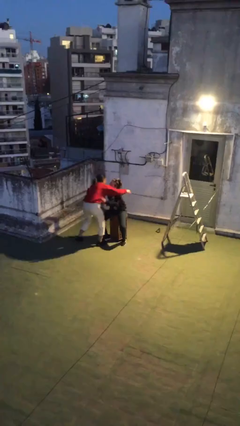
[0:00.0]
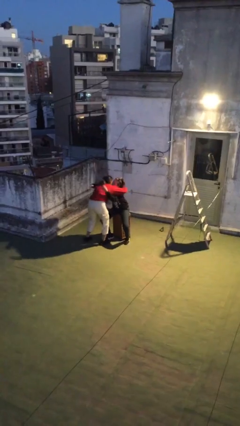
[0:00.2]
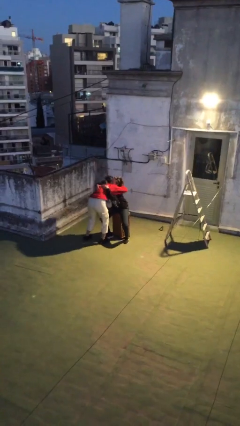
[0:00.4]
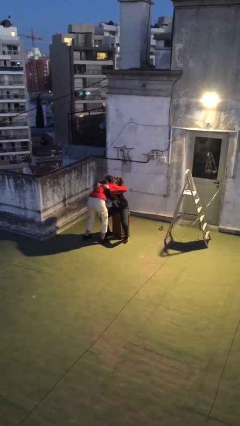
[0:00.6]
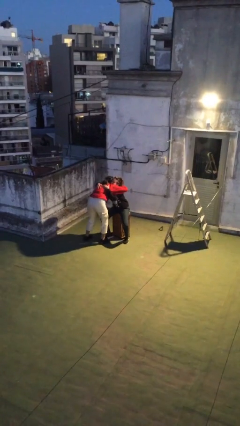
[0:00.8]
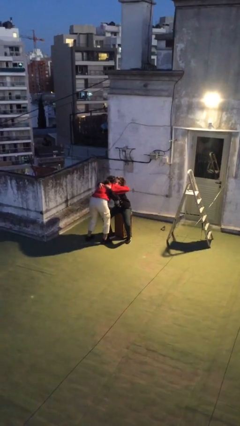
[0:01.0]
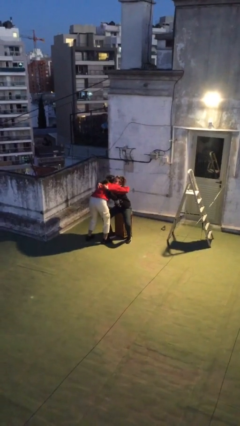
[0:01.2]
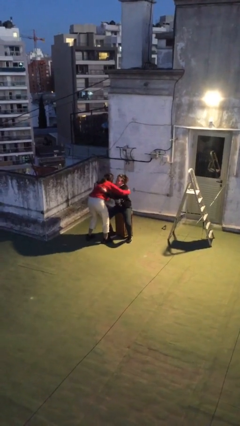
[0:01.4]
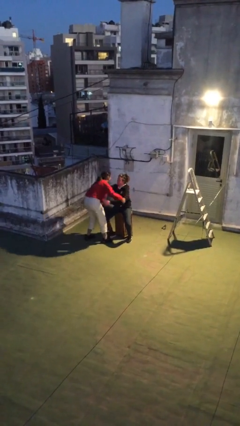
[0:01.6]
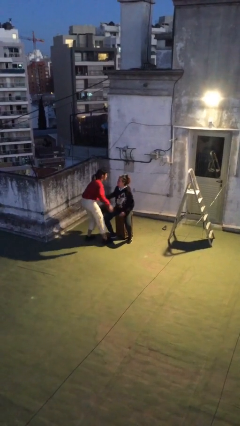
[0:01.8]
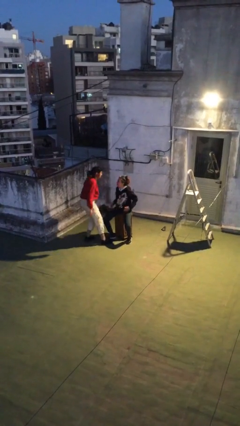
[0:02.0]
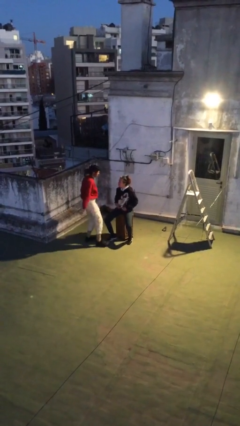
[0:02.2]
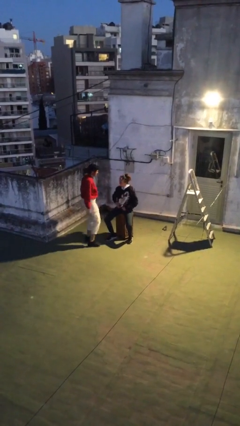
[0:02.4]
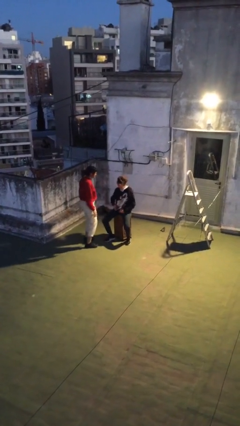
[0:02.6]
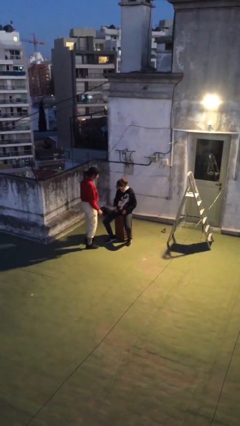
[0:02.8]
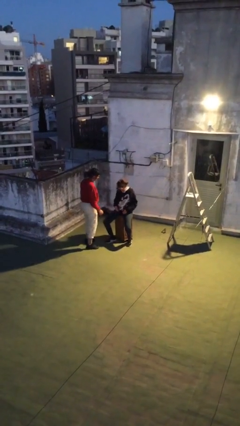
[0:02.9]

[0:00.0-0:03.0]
person embraces person

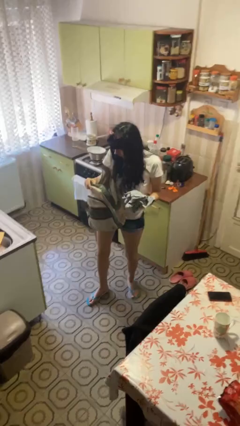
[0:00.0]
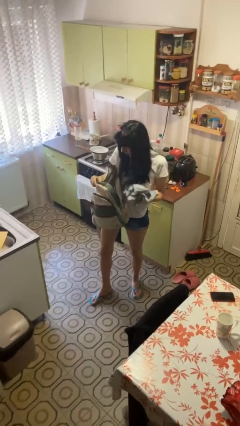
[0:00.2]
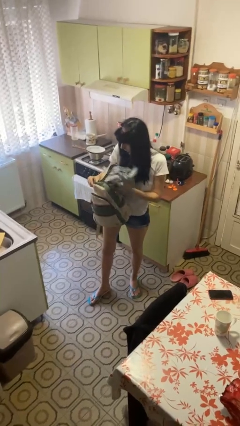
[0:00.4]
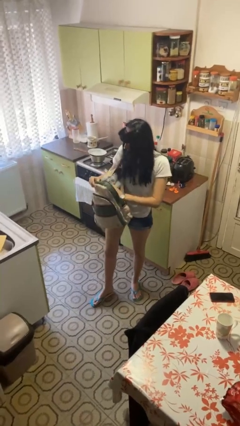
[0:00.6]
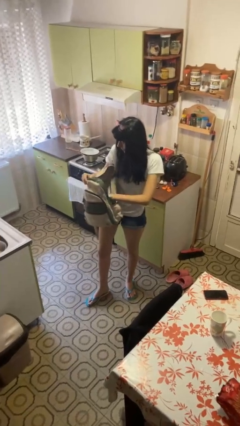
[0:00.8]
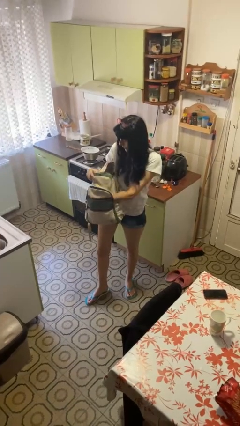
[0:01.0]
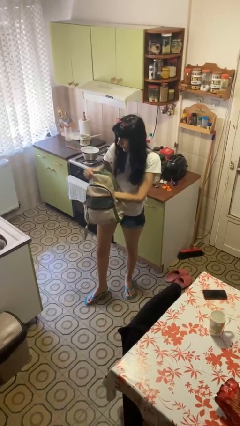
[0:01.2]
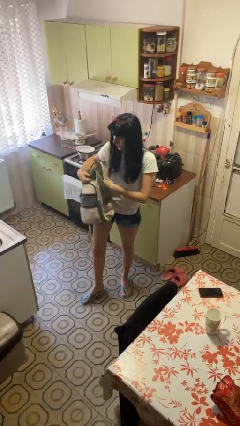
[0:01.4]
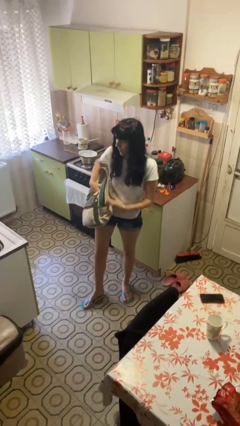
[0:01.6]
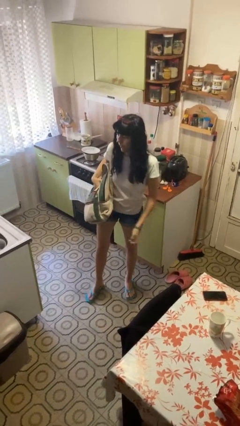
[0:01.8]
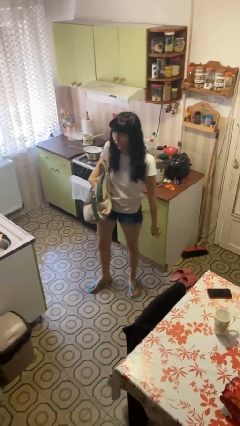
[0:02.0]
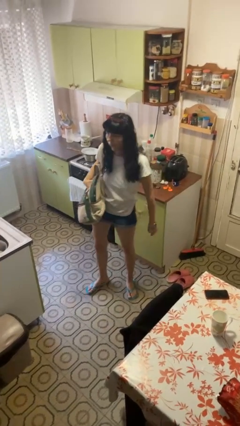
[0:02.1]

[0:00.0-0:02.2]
person puts object into backpack

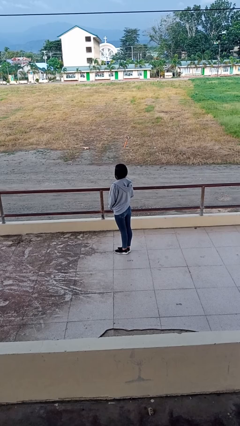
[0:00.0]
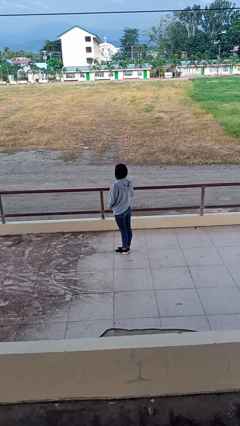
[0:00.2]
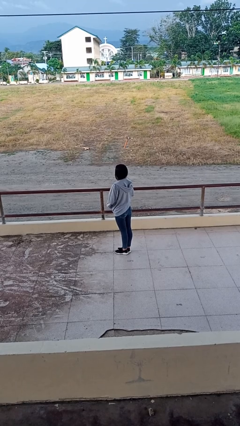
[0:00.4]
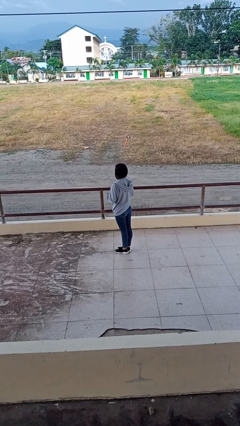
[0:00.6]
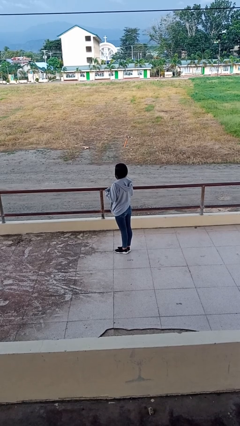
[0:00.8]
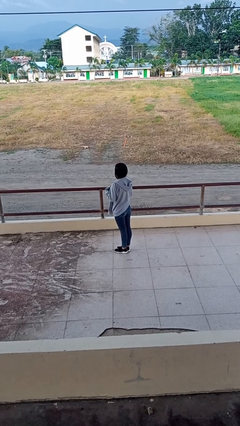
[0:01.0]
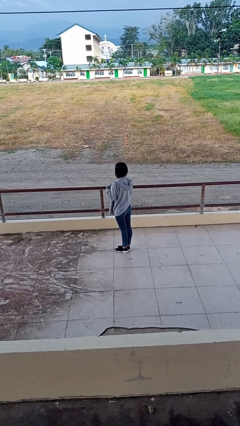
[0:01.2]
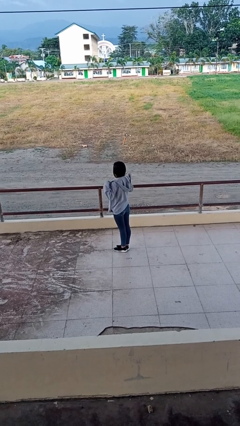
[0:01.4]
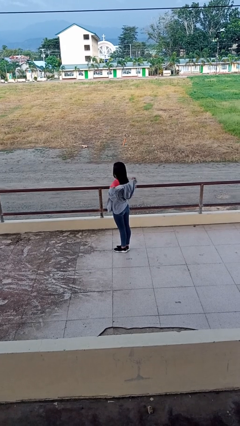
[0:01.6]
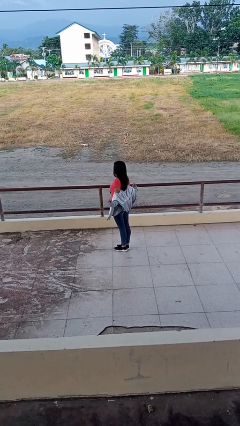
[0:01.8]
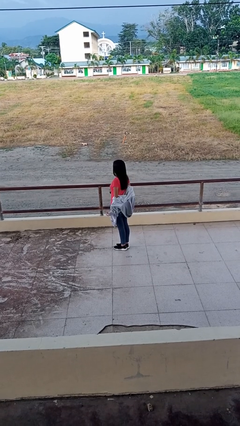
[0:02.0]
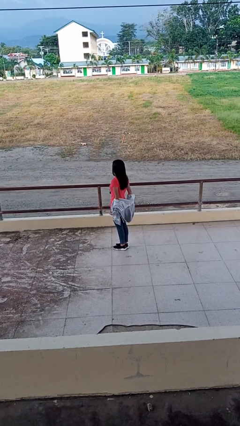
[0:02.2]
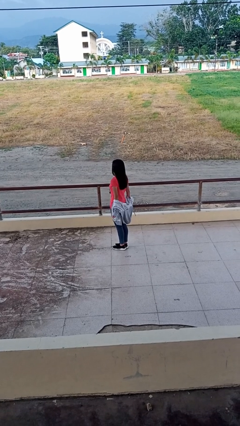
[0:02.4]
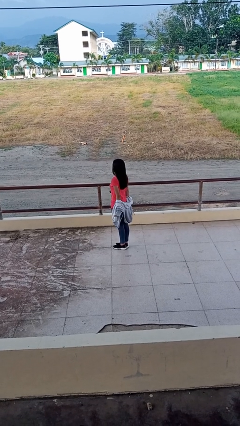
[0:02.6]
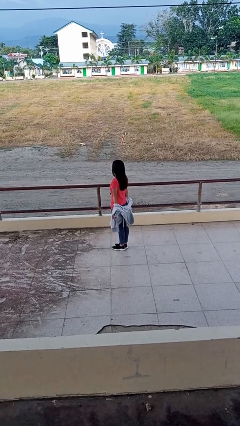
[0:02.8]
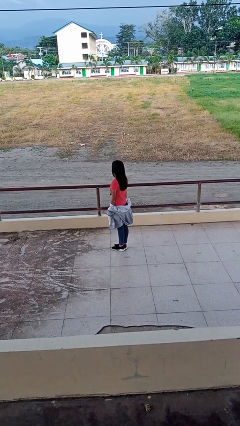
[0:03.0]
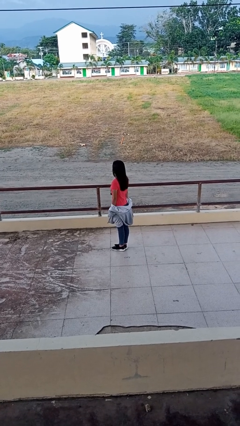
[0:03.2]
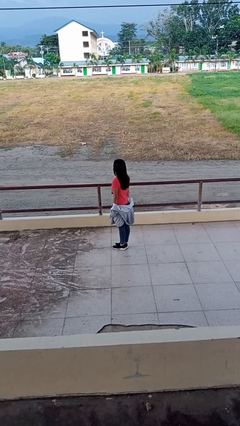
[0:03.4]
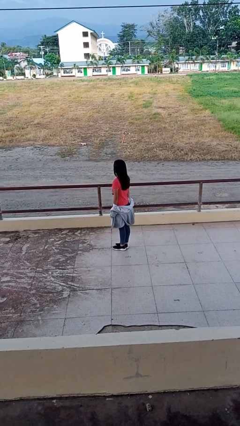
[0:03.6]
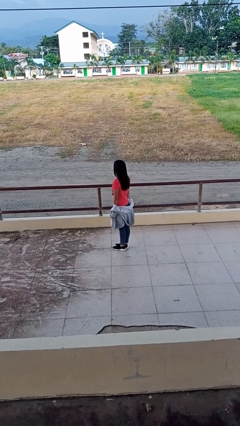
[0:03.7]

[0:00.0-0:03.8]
person takes off jacket

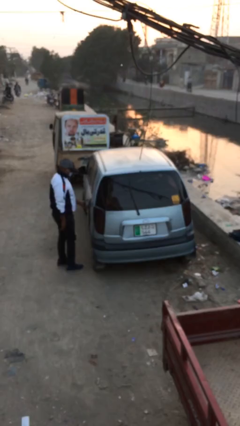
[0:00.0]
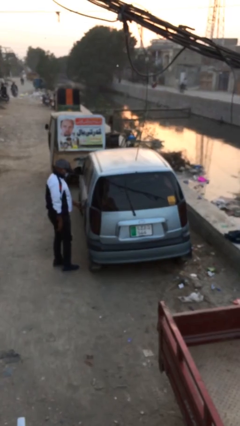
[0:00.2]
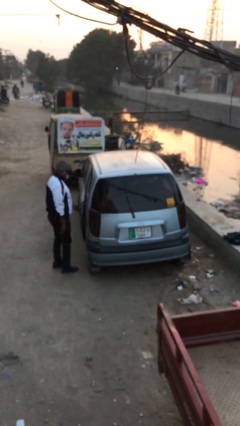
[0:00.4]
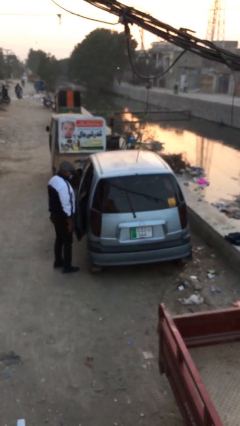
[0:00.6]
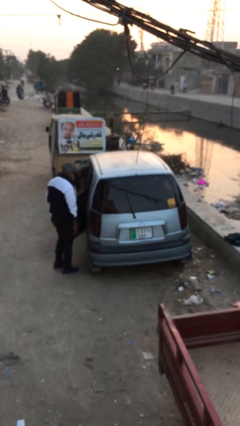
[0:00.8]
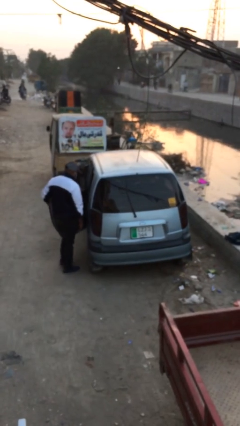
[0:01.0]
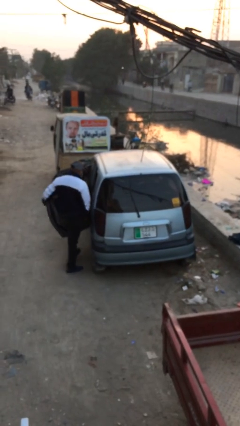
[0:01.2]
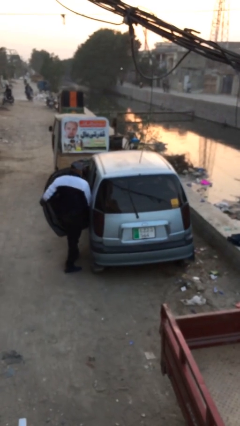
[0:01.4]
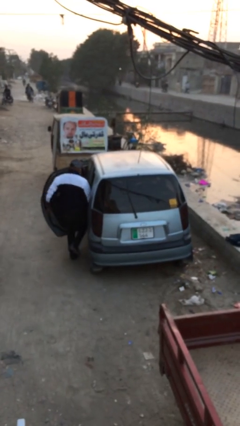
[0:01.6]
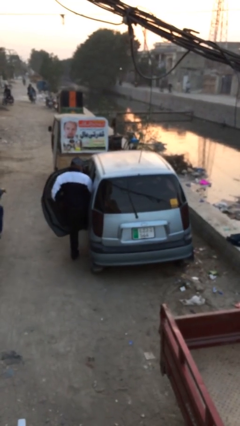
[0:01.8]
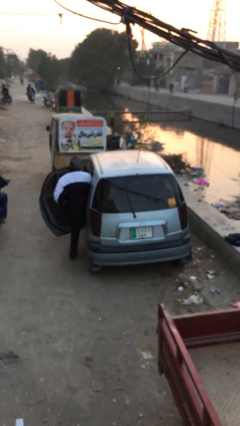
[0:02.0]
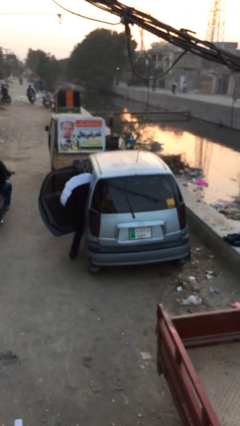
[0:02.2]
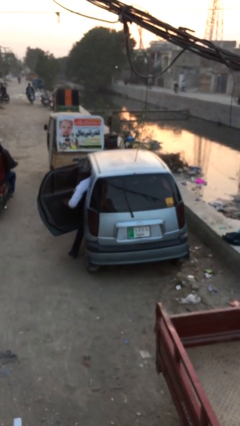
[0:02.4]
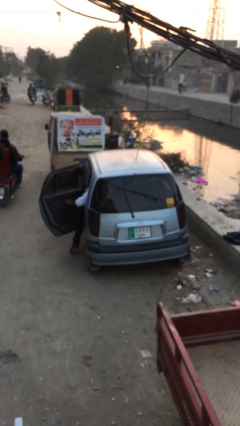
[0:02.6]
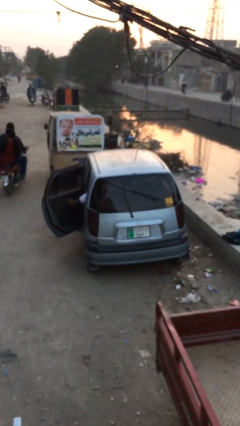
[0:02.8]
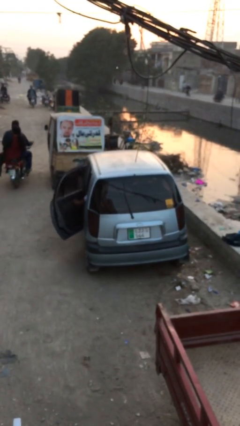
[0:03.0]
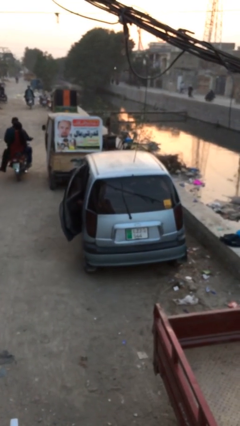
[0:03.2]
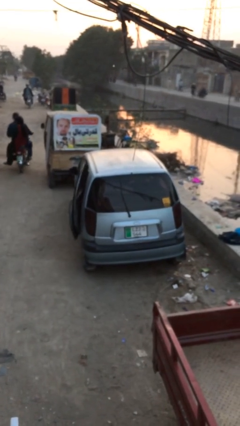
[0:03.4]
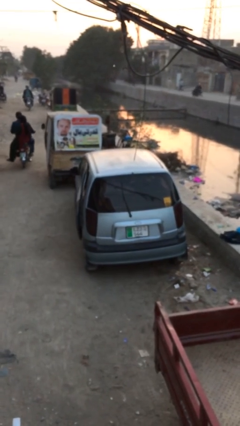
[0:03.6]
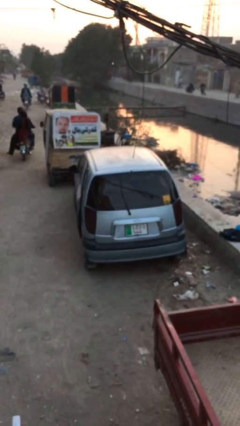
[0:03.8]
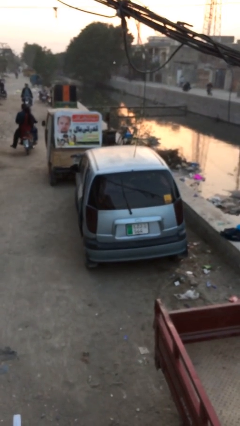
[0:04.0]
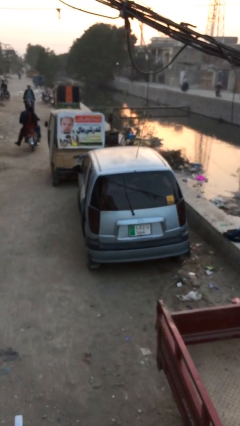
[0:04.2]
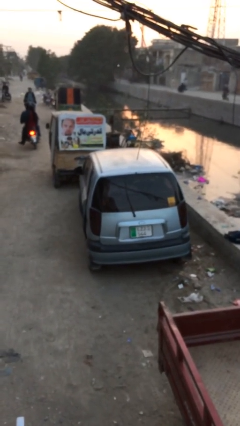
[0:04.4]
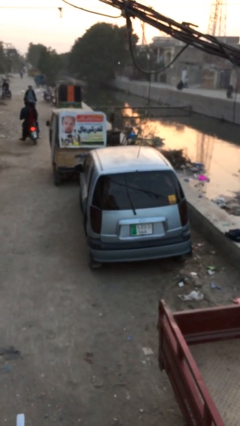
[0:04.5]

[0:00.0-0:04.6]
car picks up person

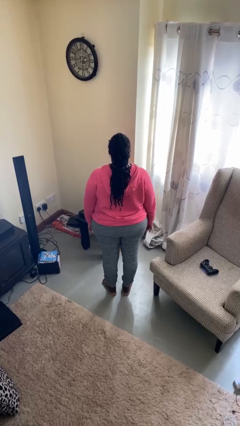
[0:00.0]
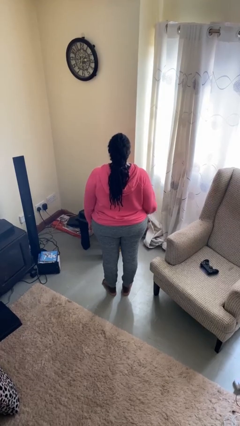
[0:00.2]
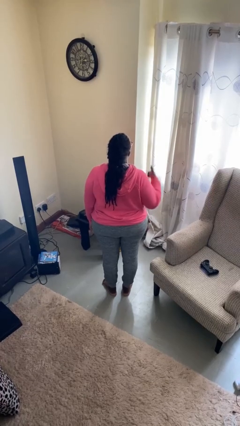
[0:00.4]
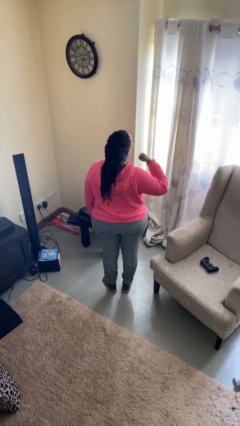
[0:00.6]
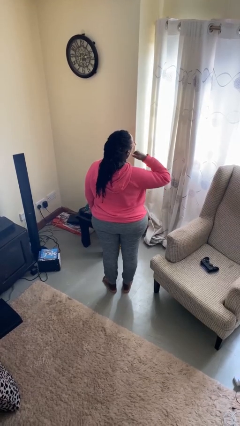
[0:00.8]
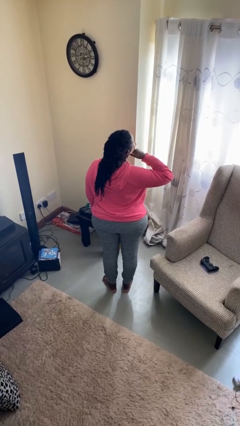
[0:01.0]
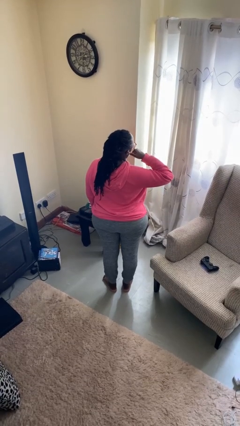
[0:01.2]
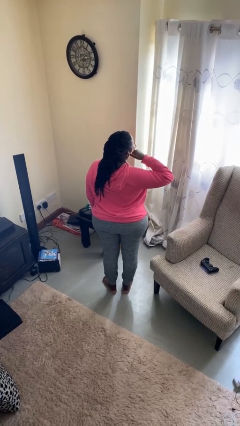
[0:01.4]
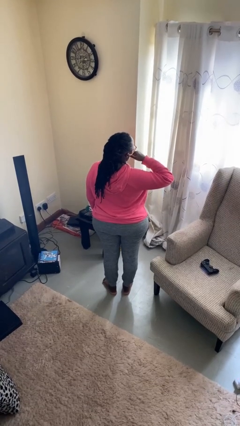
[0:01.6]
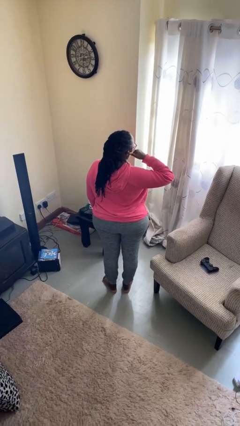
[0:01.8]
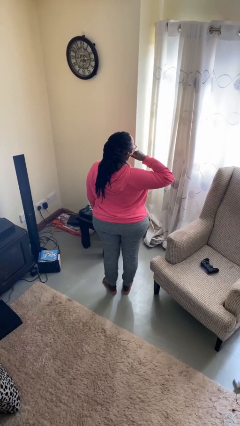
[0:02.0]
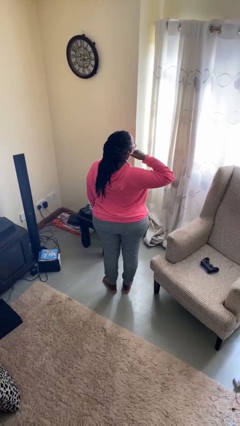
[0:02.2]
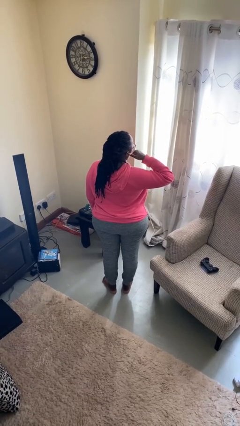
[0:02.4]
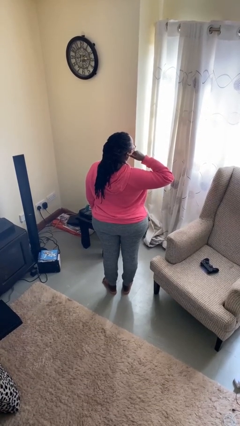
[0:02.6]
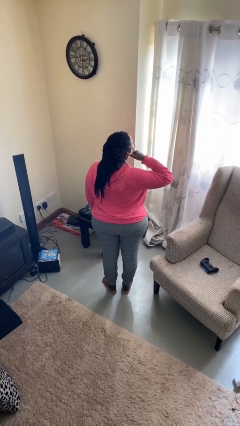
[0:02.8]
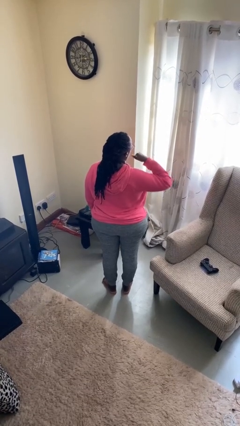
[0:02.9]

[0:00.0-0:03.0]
person gestures call me

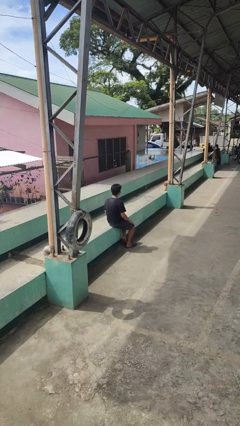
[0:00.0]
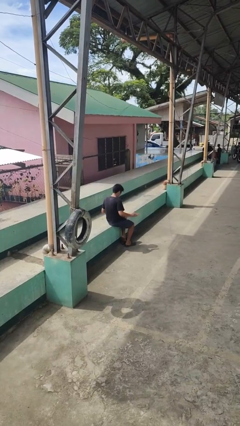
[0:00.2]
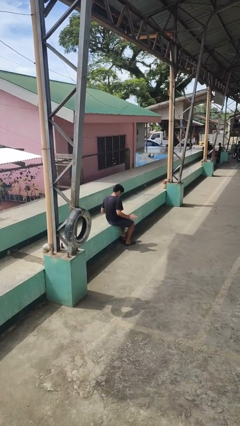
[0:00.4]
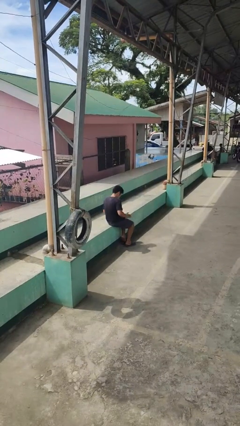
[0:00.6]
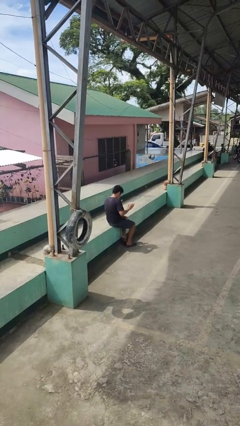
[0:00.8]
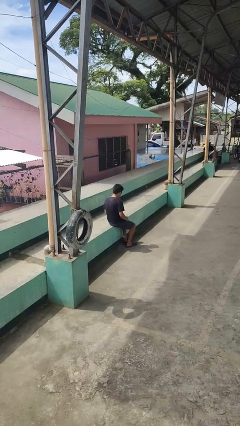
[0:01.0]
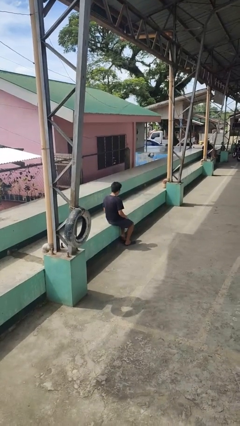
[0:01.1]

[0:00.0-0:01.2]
person slaps hands on thighs
